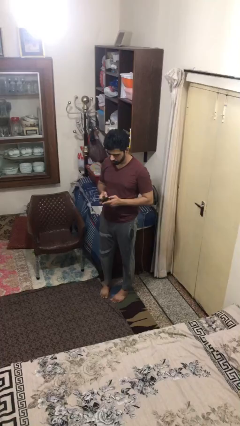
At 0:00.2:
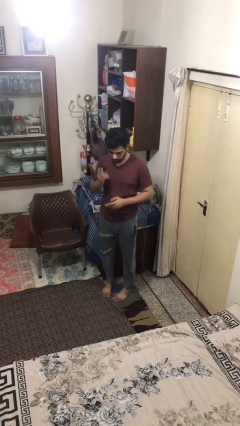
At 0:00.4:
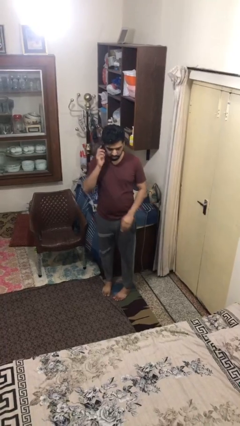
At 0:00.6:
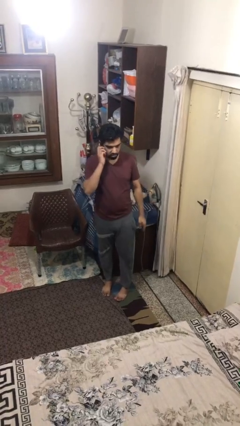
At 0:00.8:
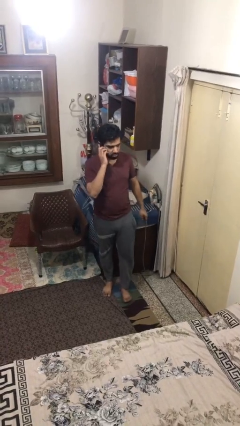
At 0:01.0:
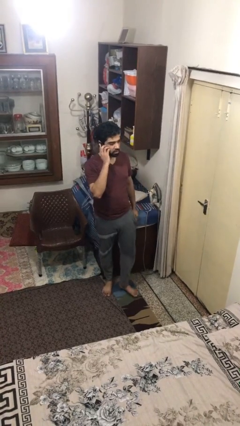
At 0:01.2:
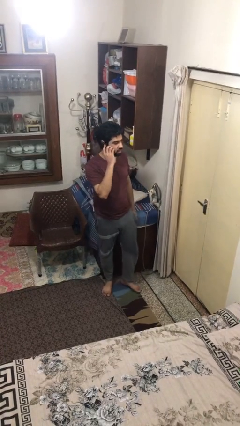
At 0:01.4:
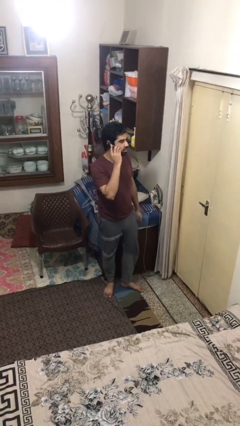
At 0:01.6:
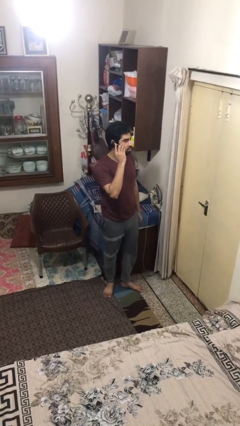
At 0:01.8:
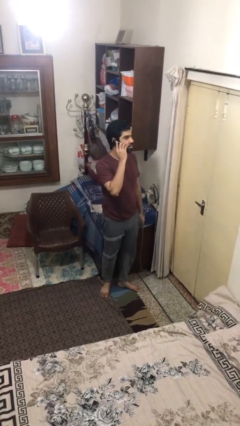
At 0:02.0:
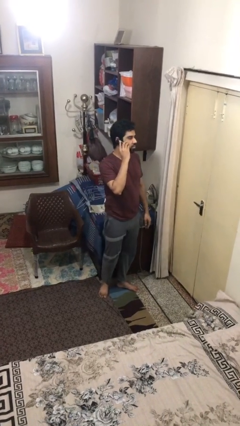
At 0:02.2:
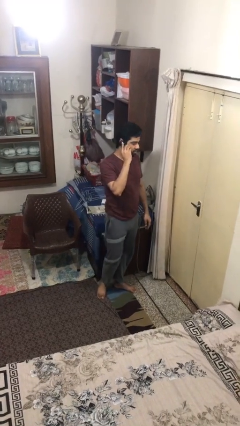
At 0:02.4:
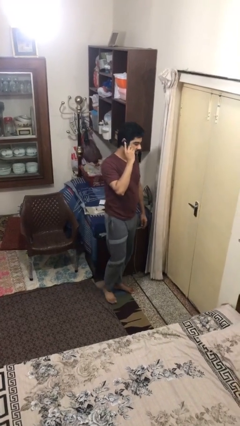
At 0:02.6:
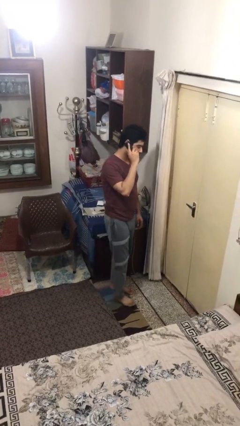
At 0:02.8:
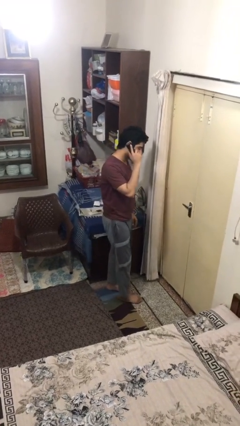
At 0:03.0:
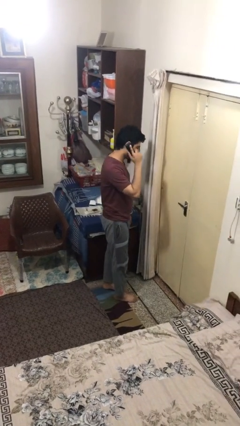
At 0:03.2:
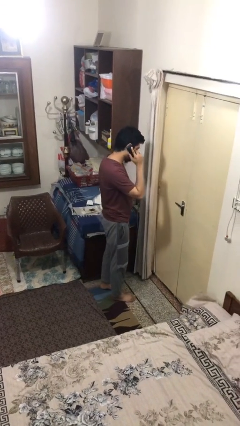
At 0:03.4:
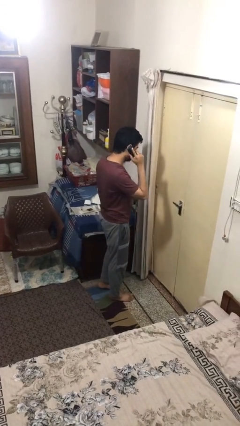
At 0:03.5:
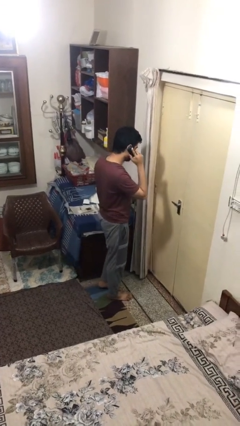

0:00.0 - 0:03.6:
person talks on phone

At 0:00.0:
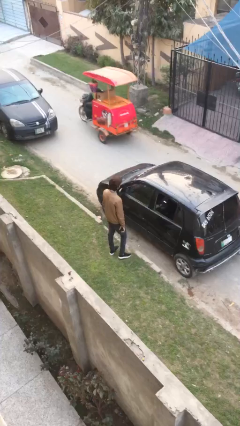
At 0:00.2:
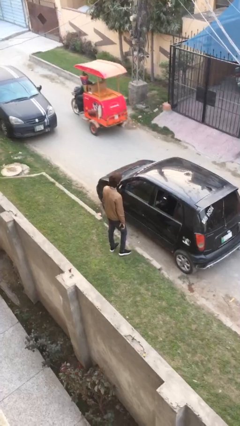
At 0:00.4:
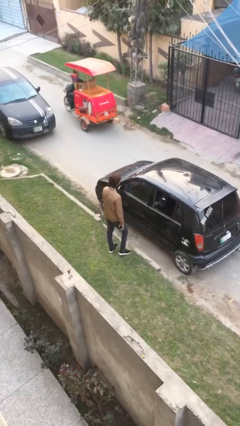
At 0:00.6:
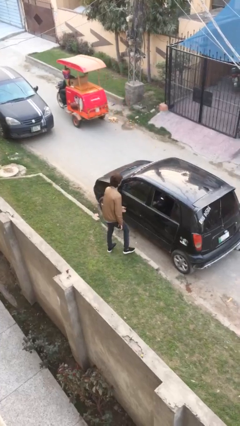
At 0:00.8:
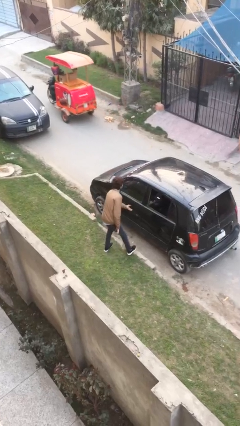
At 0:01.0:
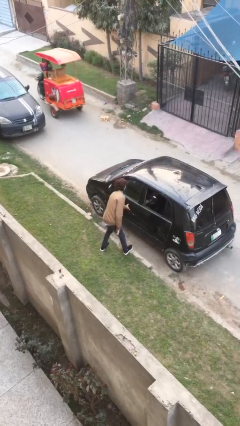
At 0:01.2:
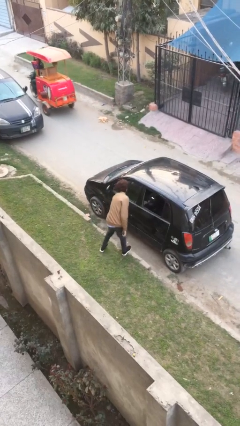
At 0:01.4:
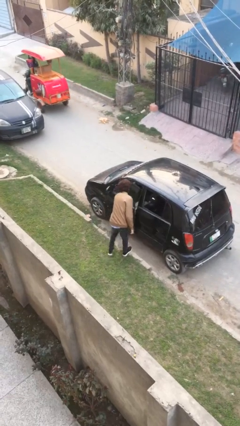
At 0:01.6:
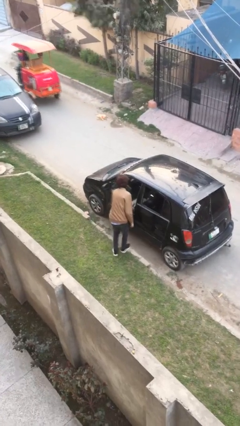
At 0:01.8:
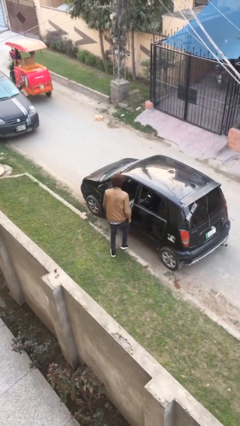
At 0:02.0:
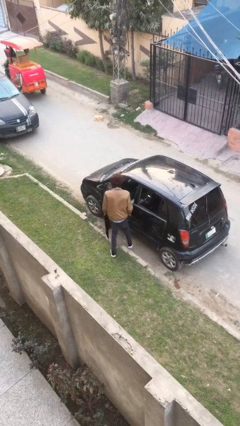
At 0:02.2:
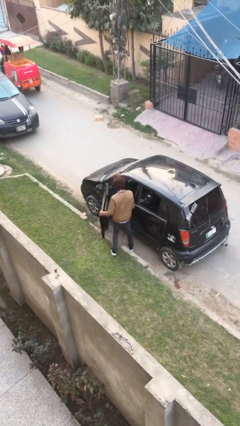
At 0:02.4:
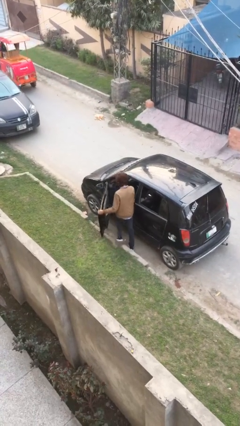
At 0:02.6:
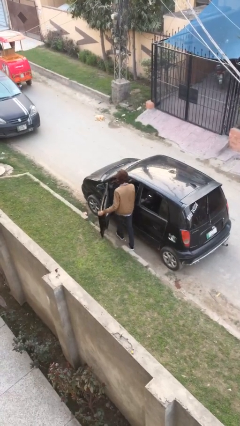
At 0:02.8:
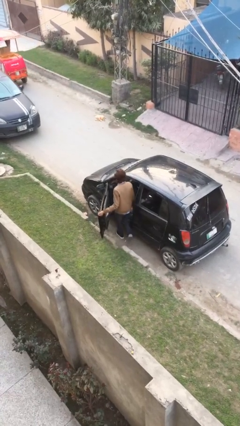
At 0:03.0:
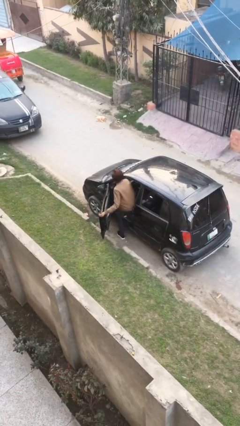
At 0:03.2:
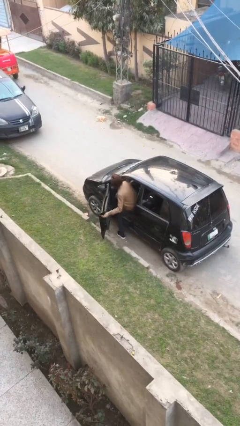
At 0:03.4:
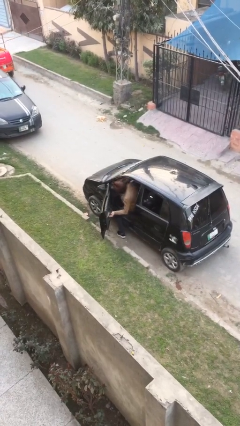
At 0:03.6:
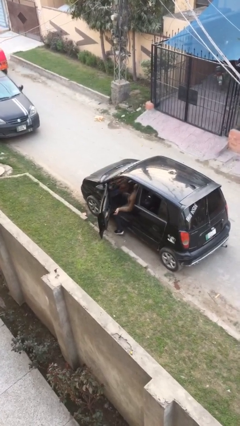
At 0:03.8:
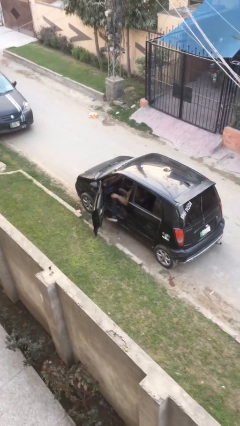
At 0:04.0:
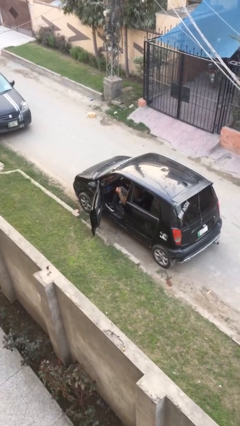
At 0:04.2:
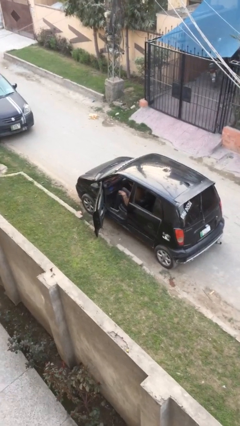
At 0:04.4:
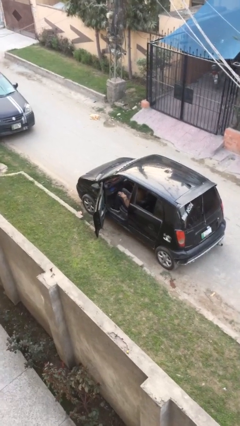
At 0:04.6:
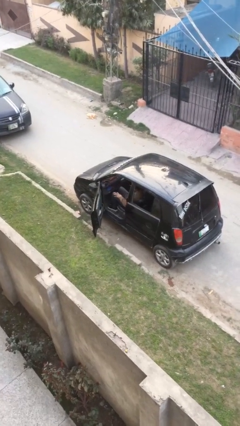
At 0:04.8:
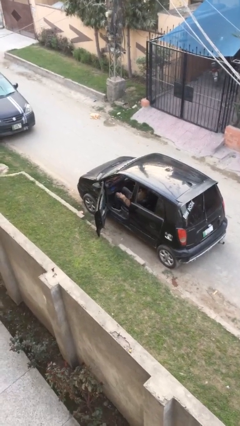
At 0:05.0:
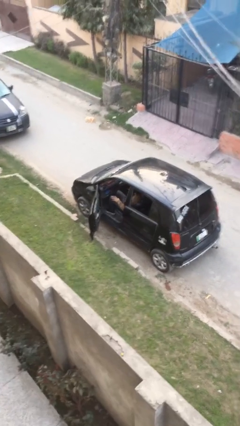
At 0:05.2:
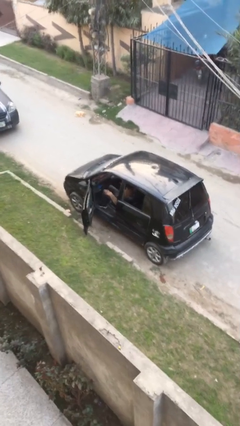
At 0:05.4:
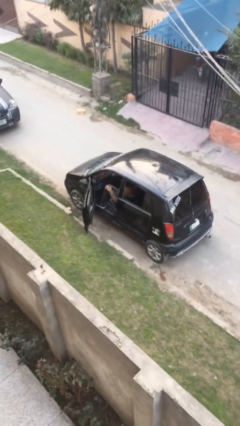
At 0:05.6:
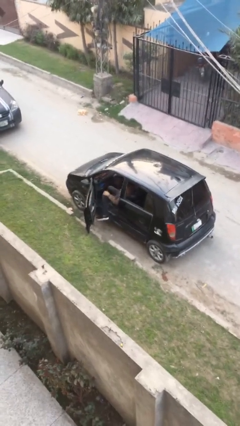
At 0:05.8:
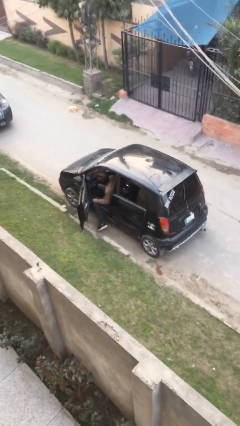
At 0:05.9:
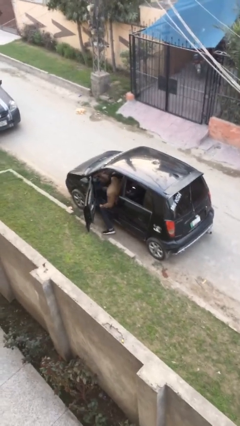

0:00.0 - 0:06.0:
person enters car

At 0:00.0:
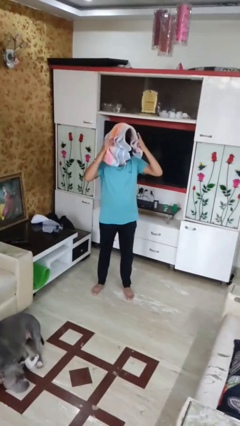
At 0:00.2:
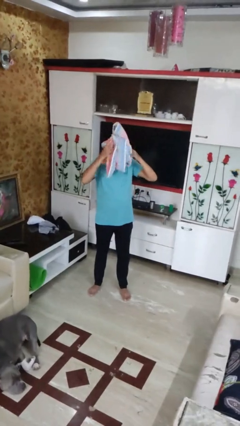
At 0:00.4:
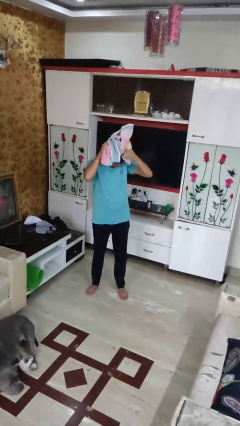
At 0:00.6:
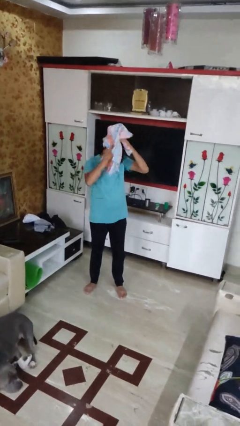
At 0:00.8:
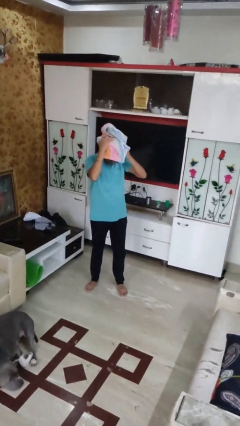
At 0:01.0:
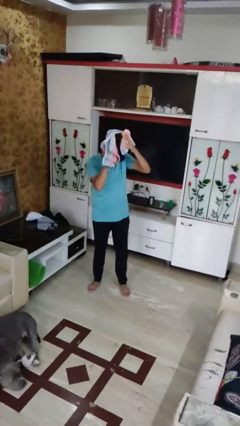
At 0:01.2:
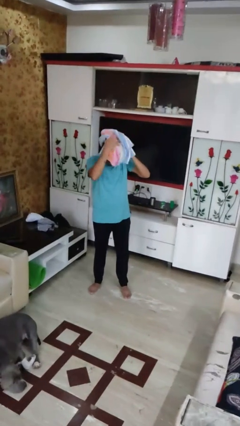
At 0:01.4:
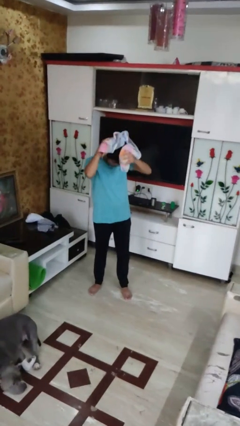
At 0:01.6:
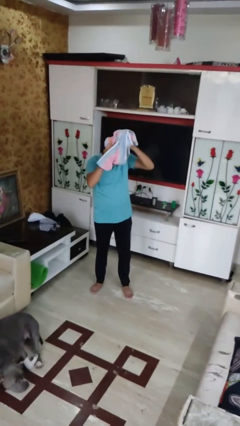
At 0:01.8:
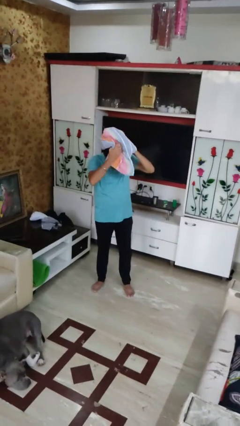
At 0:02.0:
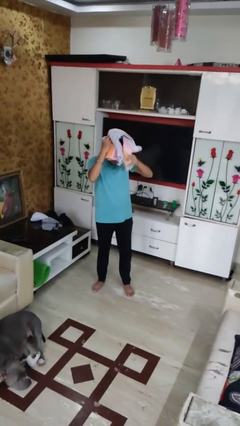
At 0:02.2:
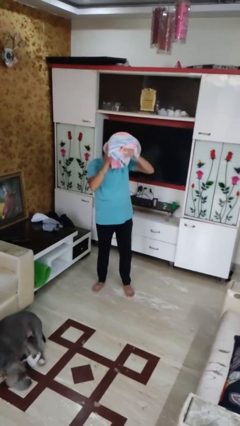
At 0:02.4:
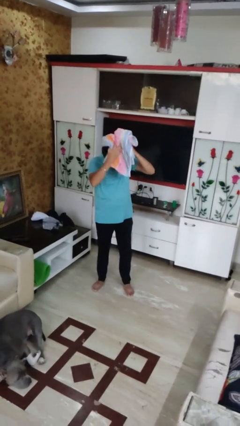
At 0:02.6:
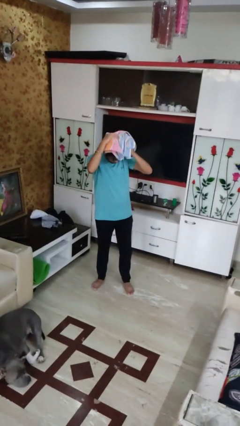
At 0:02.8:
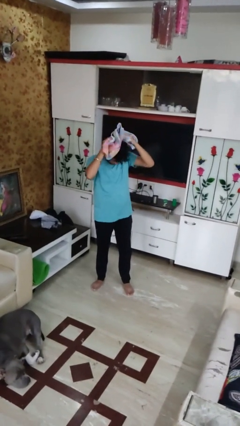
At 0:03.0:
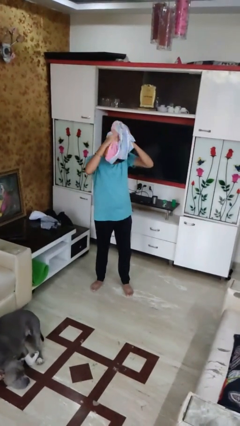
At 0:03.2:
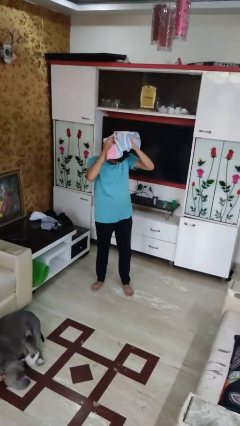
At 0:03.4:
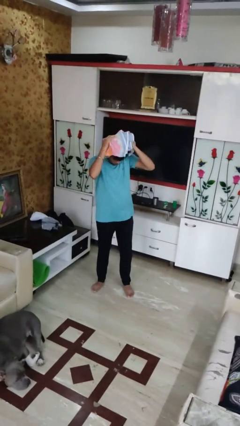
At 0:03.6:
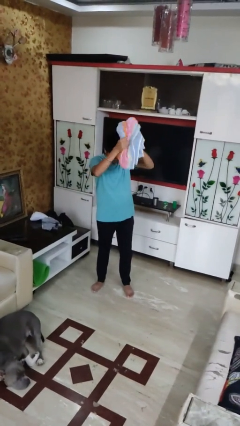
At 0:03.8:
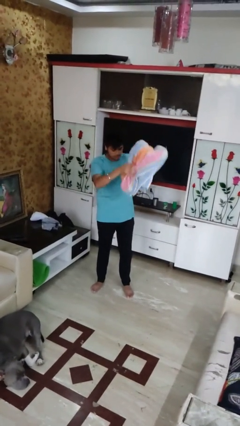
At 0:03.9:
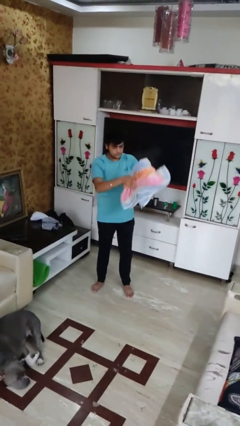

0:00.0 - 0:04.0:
person dries hair with towel

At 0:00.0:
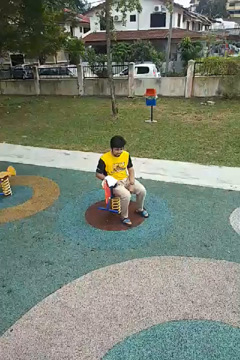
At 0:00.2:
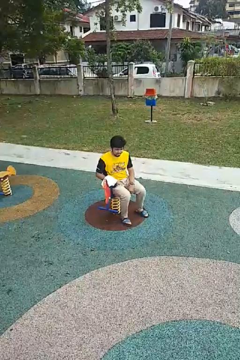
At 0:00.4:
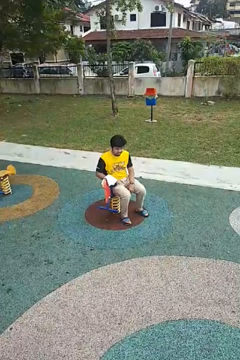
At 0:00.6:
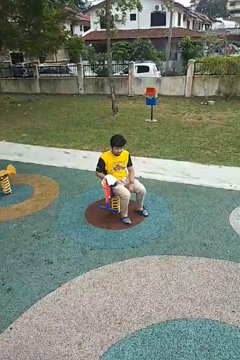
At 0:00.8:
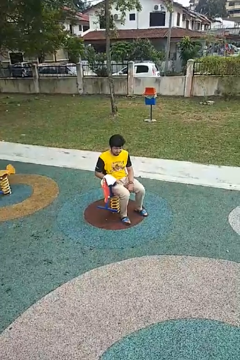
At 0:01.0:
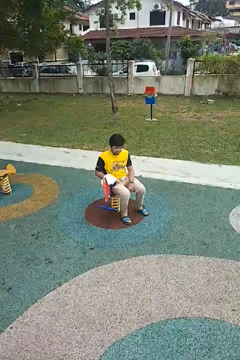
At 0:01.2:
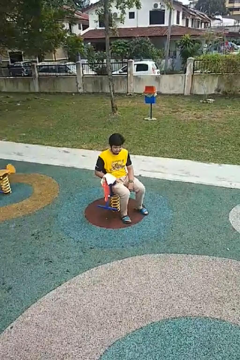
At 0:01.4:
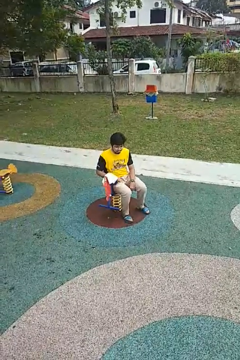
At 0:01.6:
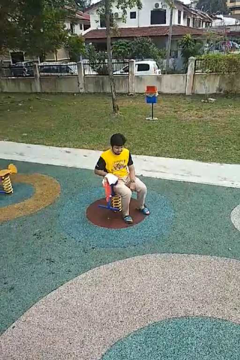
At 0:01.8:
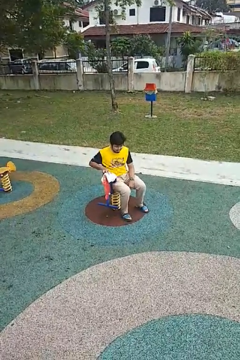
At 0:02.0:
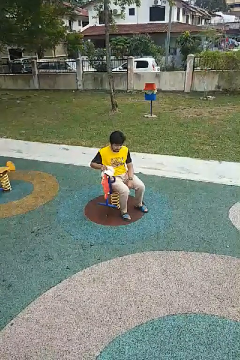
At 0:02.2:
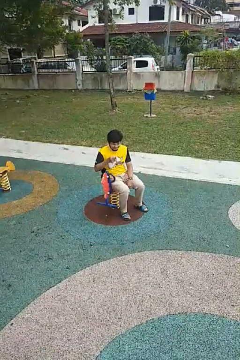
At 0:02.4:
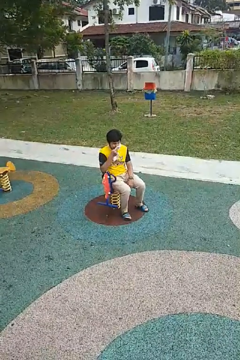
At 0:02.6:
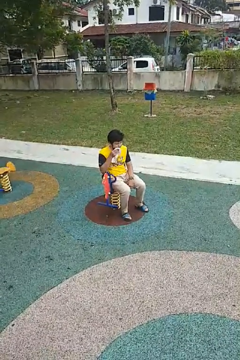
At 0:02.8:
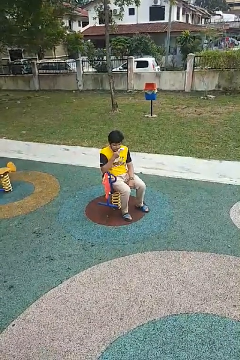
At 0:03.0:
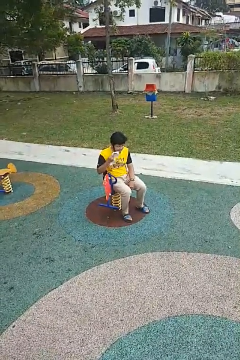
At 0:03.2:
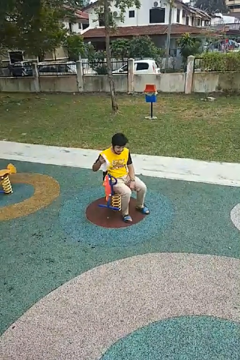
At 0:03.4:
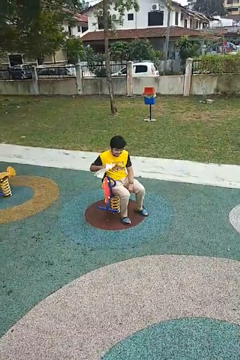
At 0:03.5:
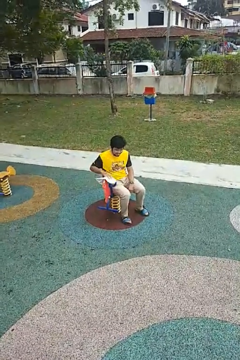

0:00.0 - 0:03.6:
person wipes mouth with napkin

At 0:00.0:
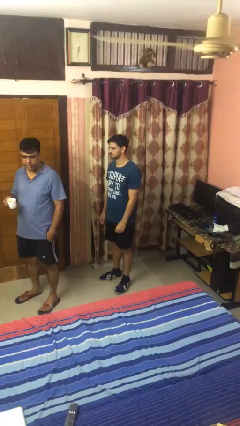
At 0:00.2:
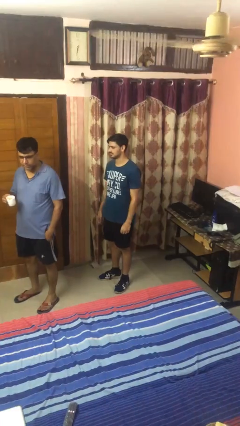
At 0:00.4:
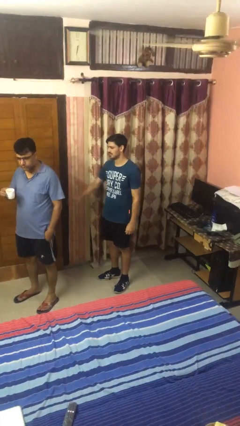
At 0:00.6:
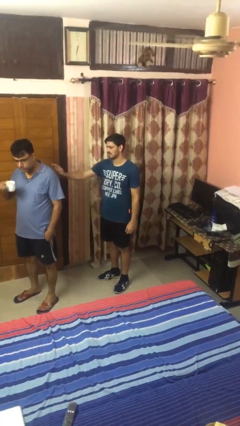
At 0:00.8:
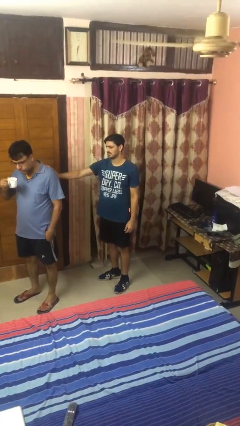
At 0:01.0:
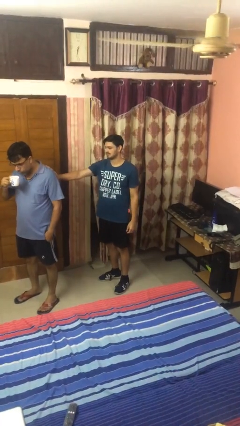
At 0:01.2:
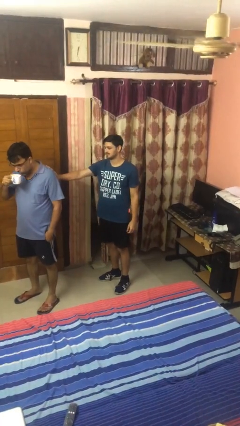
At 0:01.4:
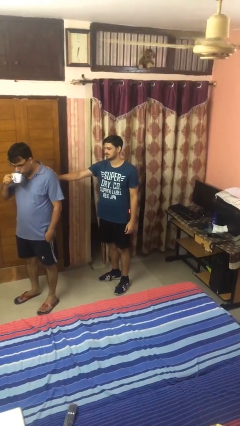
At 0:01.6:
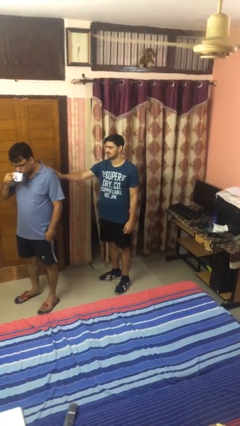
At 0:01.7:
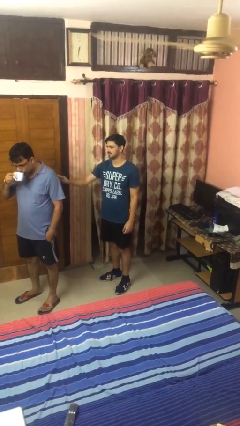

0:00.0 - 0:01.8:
person touches back of person
